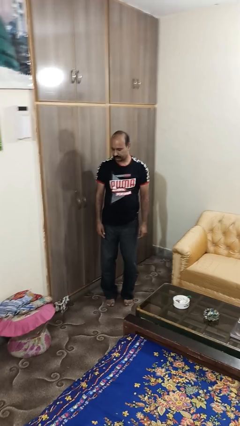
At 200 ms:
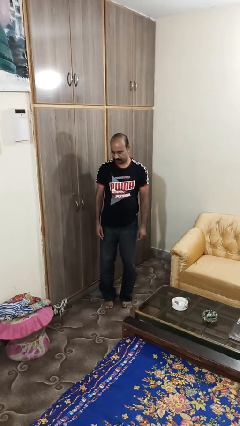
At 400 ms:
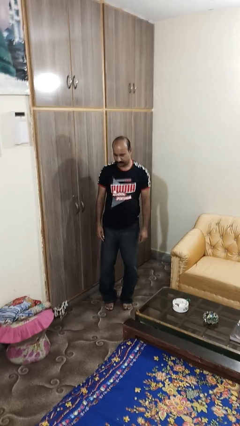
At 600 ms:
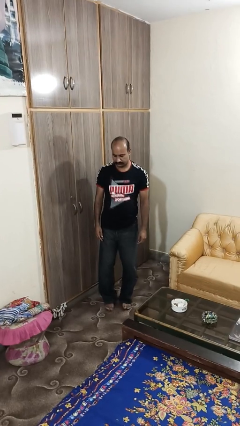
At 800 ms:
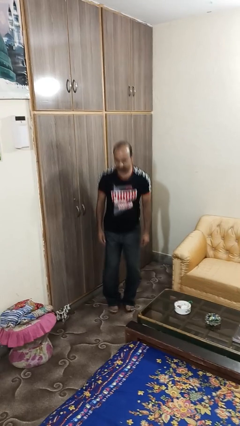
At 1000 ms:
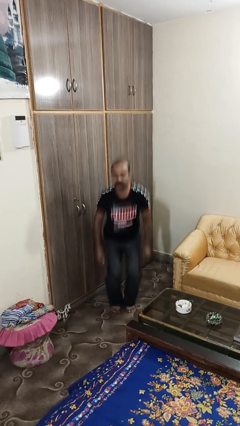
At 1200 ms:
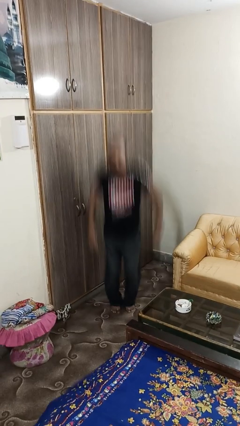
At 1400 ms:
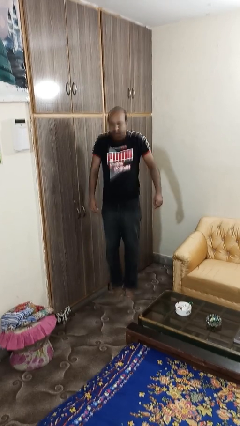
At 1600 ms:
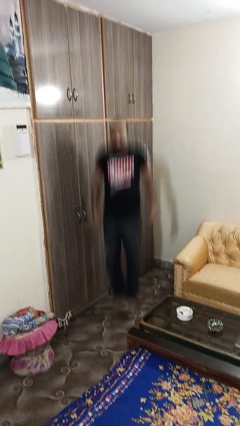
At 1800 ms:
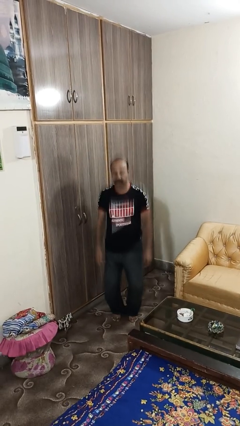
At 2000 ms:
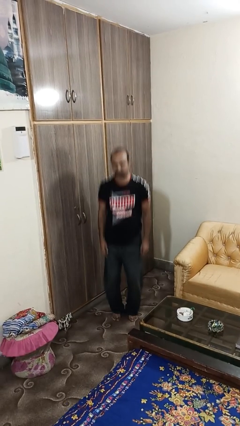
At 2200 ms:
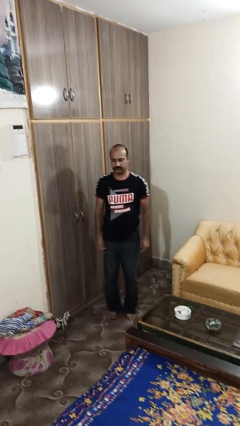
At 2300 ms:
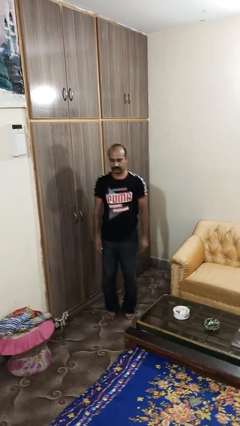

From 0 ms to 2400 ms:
person jumps

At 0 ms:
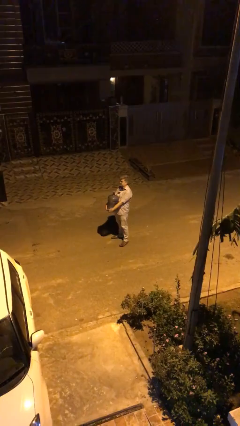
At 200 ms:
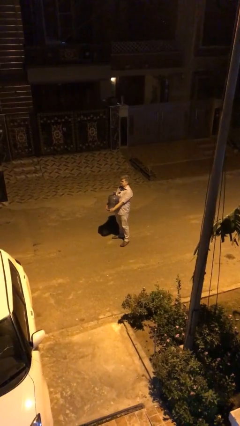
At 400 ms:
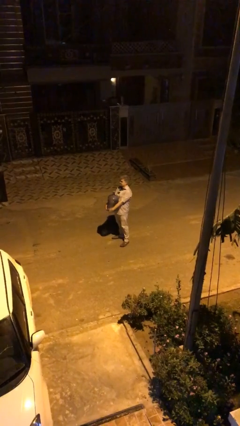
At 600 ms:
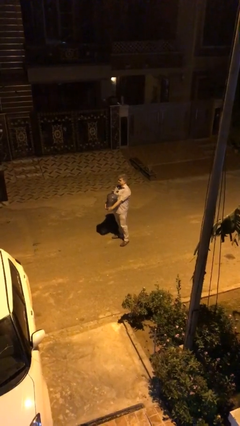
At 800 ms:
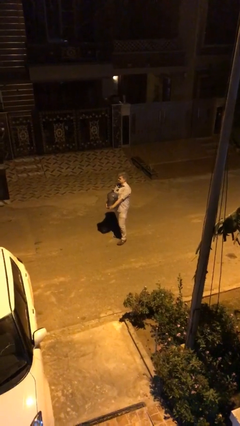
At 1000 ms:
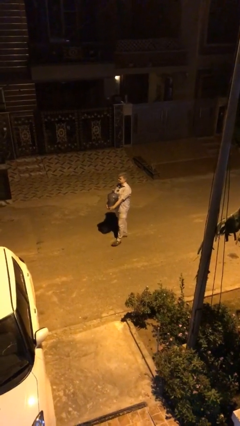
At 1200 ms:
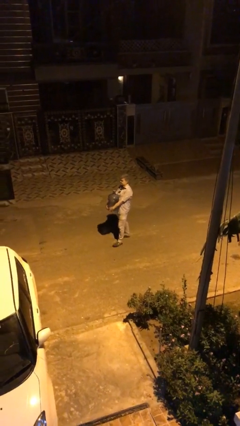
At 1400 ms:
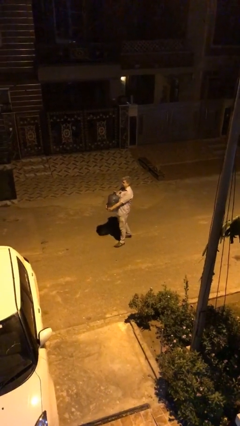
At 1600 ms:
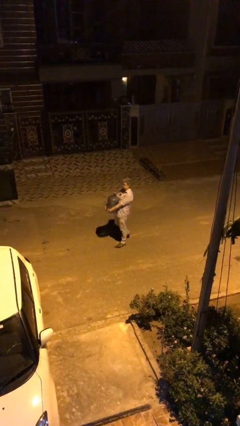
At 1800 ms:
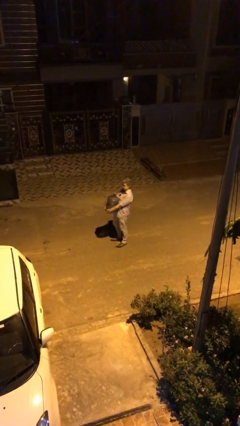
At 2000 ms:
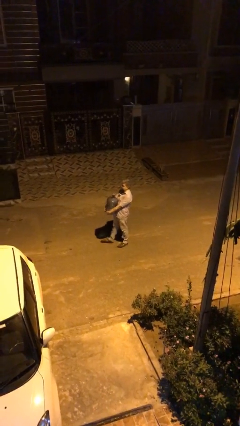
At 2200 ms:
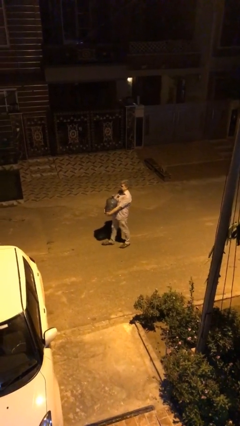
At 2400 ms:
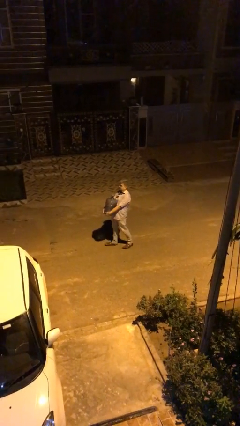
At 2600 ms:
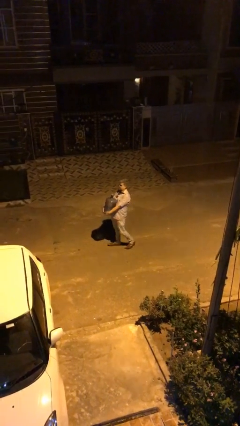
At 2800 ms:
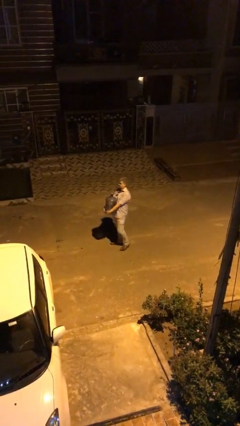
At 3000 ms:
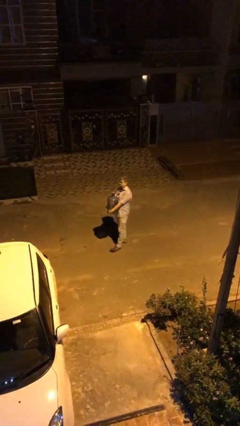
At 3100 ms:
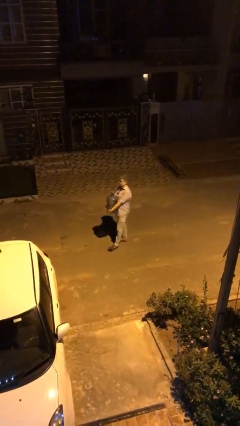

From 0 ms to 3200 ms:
person carries heavy object

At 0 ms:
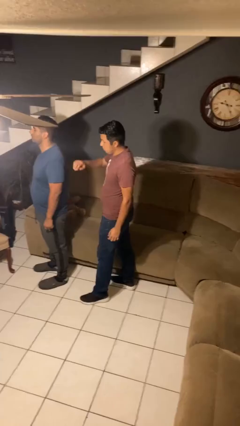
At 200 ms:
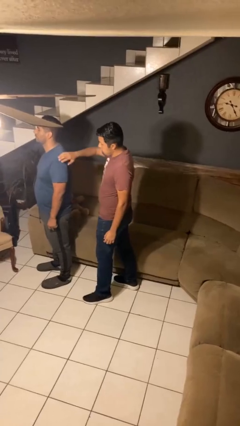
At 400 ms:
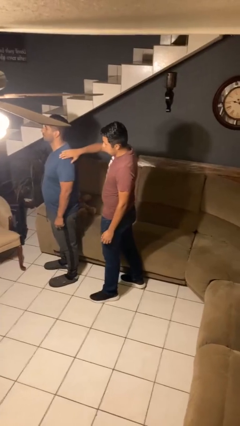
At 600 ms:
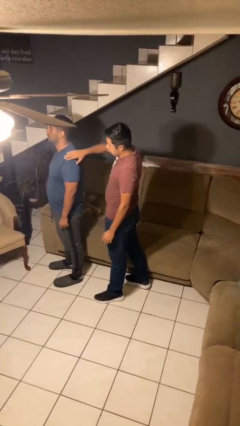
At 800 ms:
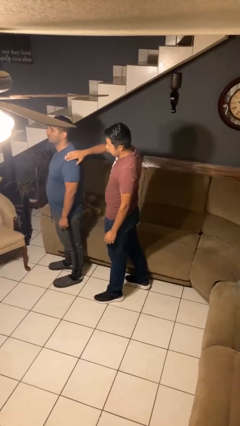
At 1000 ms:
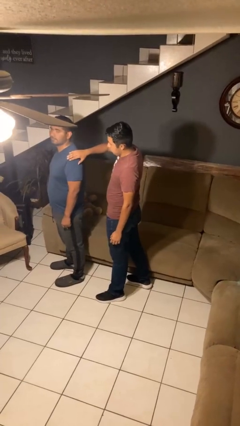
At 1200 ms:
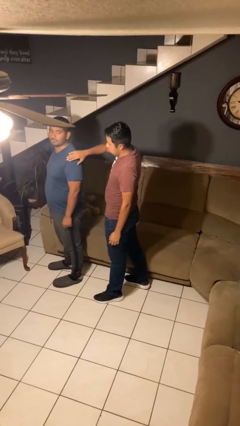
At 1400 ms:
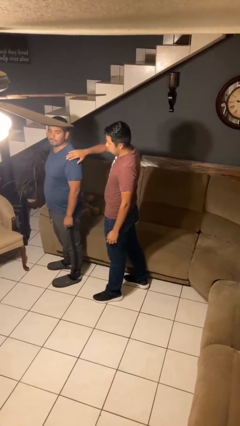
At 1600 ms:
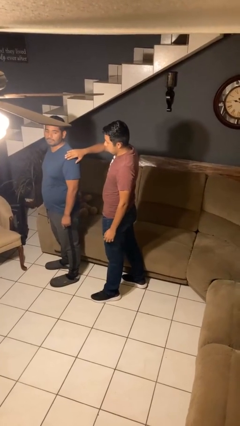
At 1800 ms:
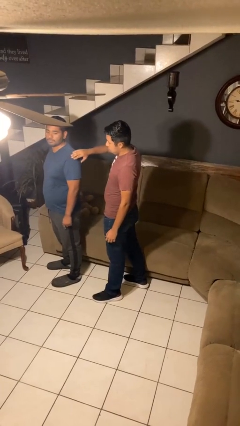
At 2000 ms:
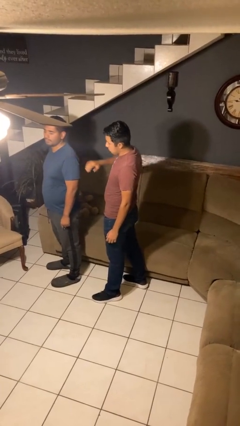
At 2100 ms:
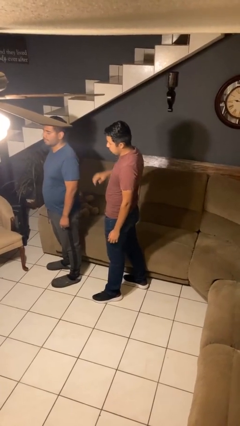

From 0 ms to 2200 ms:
person touches back of person

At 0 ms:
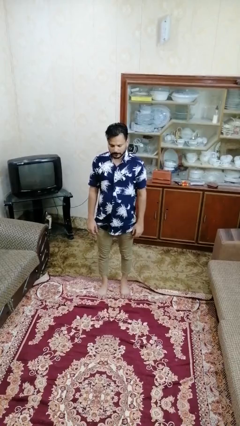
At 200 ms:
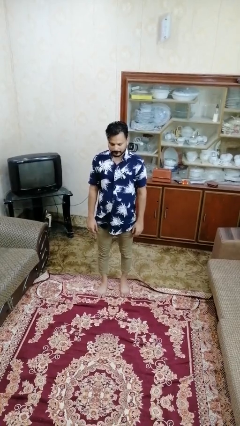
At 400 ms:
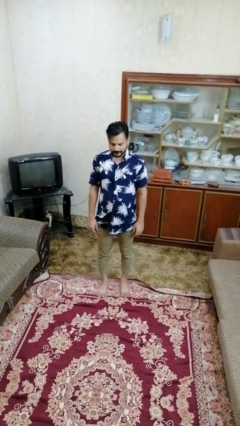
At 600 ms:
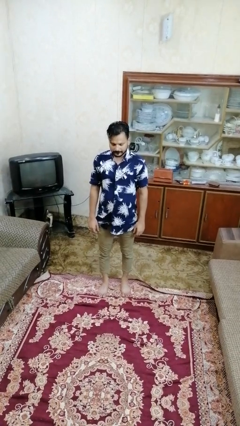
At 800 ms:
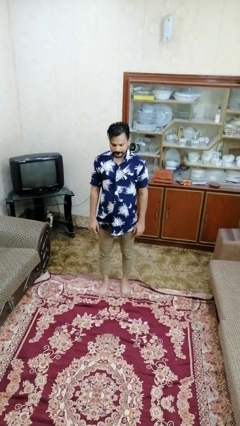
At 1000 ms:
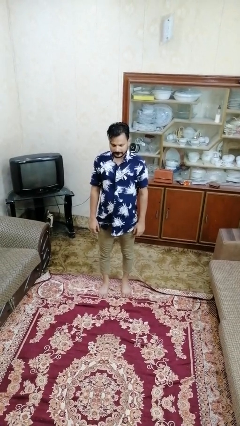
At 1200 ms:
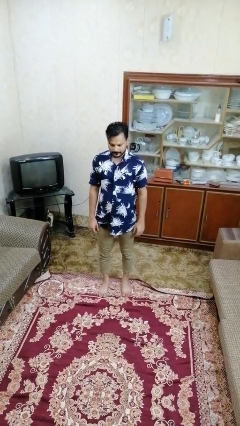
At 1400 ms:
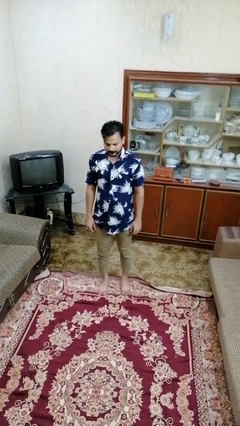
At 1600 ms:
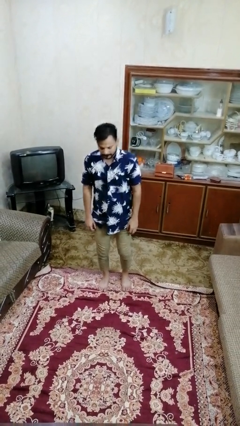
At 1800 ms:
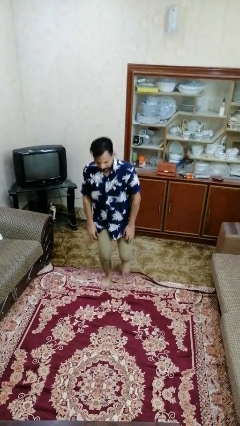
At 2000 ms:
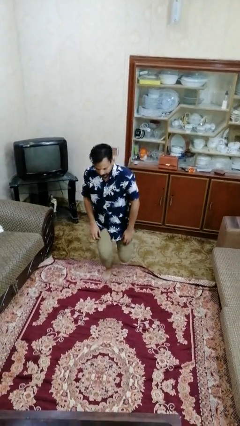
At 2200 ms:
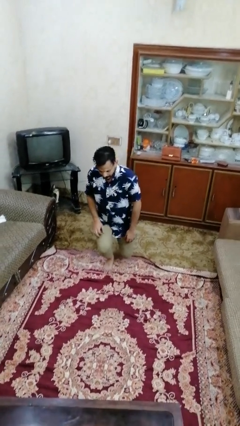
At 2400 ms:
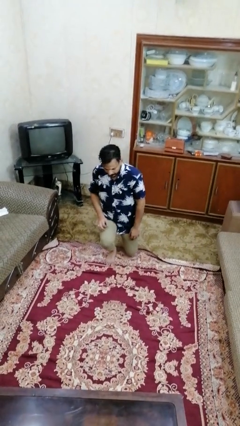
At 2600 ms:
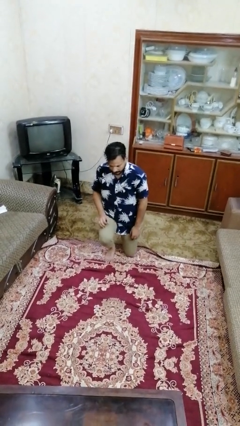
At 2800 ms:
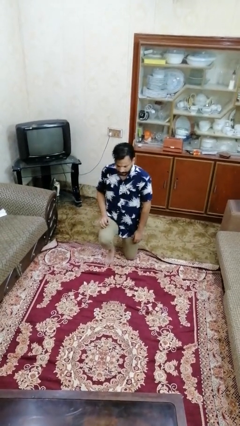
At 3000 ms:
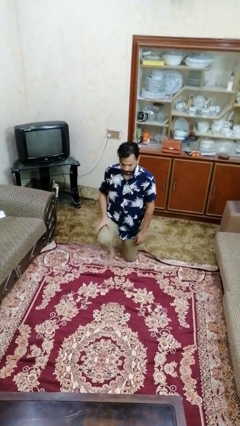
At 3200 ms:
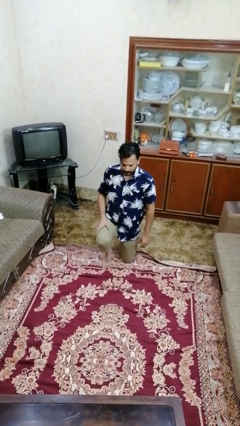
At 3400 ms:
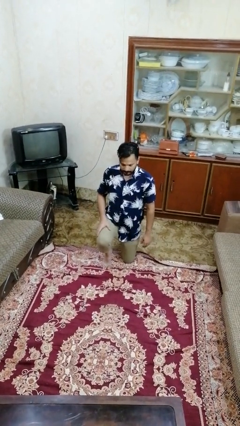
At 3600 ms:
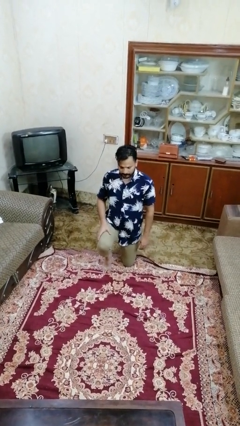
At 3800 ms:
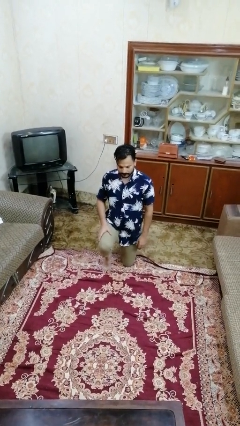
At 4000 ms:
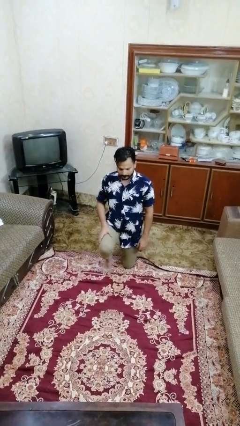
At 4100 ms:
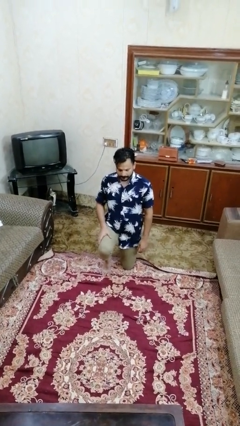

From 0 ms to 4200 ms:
person kneels

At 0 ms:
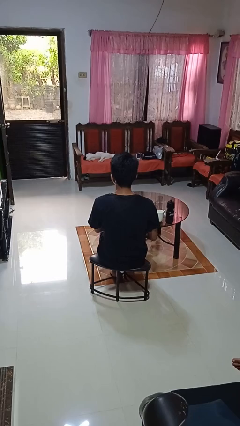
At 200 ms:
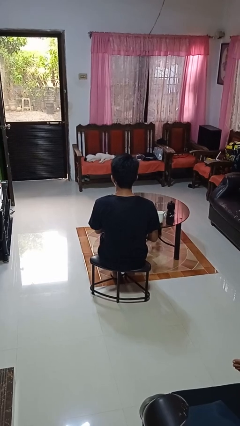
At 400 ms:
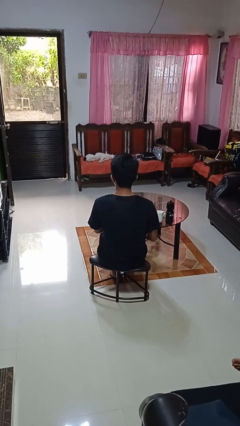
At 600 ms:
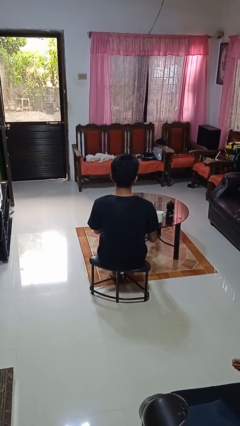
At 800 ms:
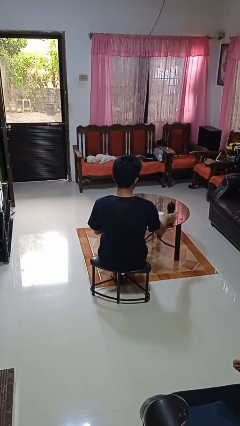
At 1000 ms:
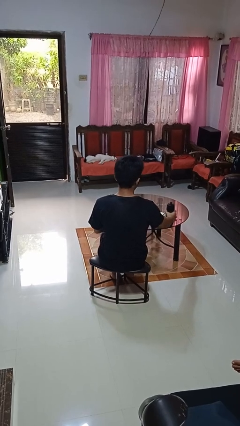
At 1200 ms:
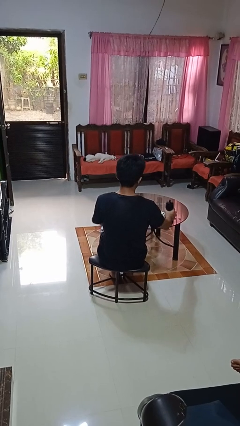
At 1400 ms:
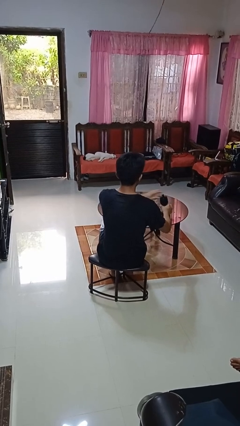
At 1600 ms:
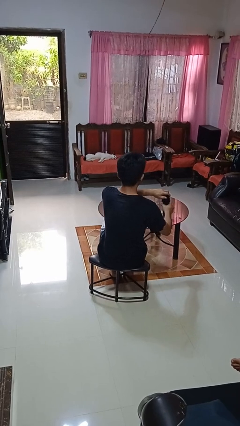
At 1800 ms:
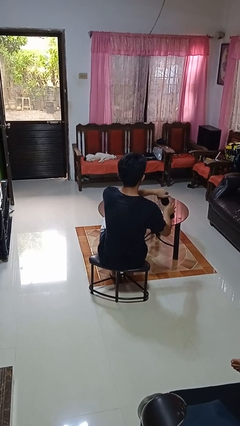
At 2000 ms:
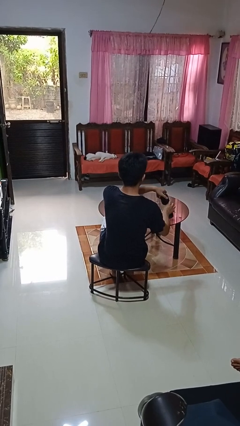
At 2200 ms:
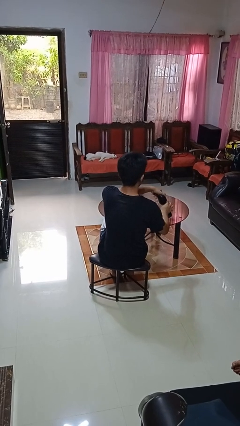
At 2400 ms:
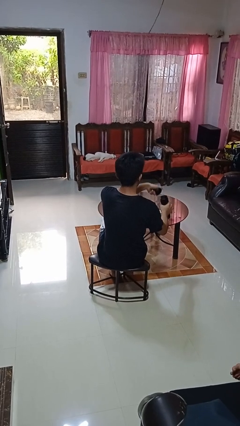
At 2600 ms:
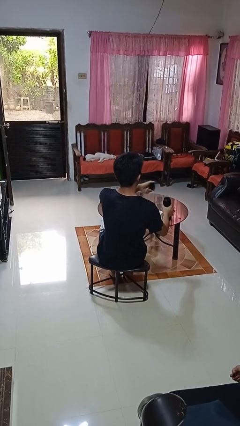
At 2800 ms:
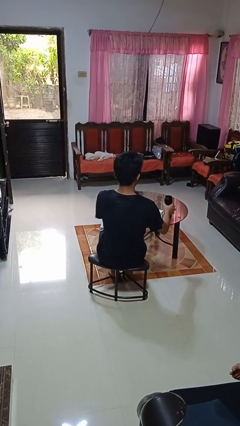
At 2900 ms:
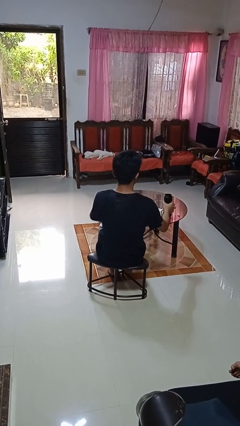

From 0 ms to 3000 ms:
person unscrews lid from bottle

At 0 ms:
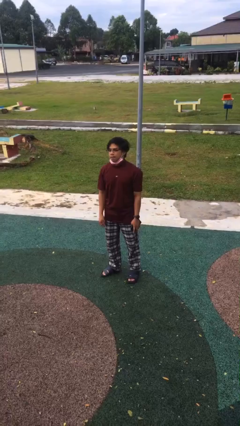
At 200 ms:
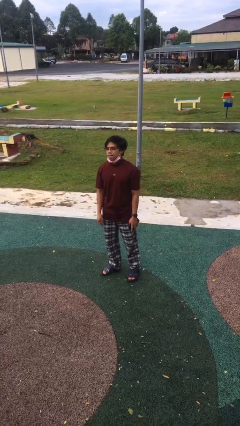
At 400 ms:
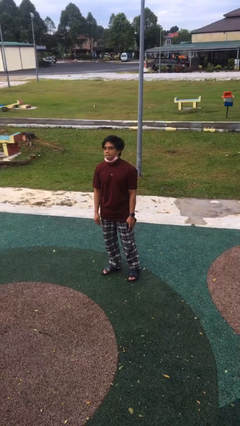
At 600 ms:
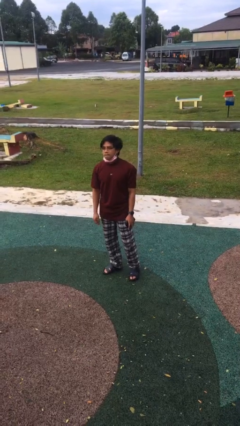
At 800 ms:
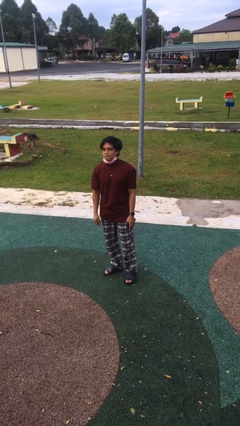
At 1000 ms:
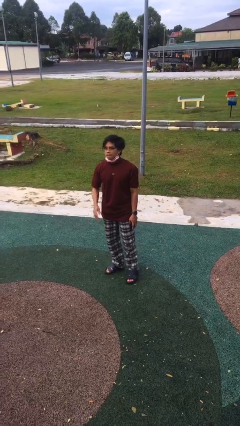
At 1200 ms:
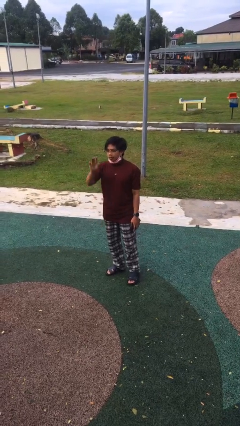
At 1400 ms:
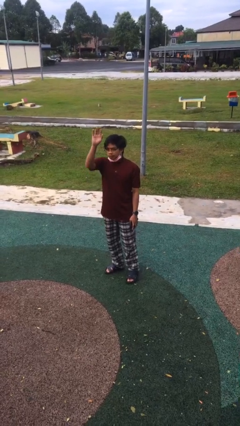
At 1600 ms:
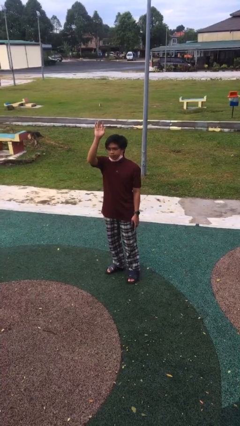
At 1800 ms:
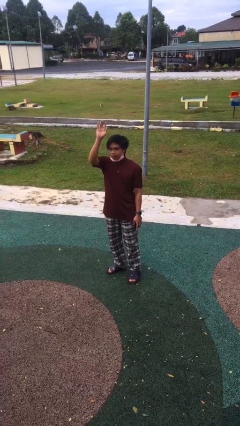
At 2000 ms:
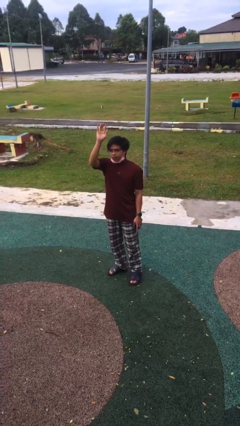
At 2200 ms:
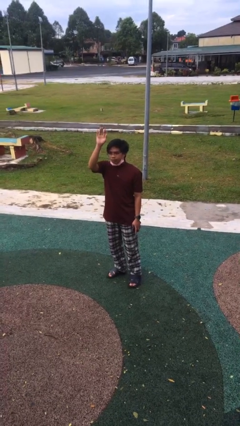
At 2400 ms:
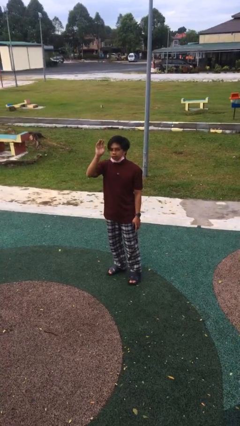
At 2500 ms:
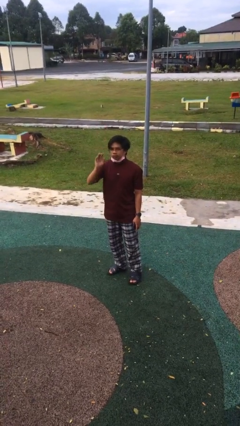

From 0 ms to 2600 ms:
person gestures raise hand
